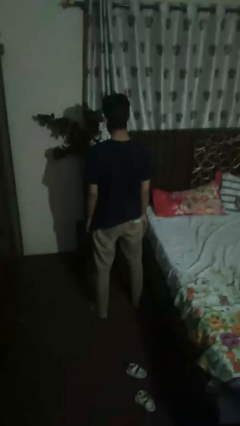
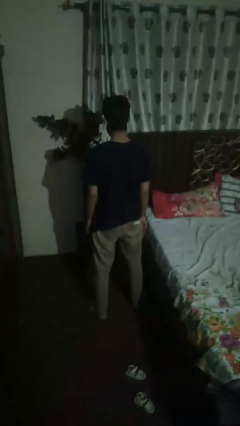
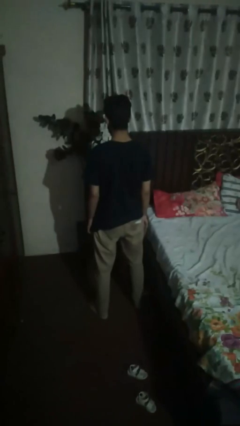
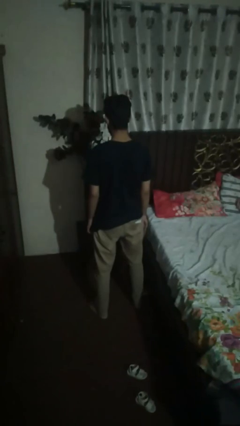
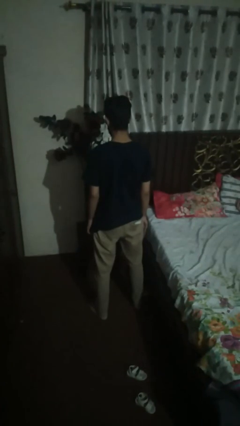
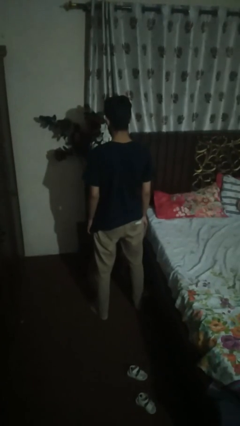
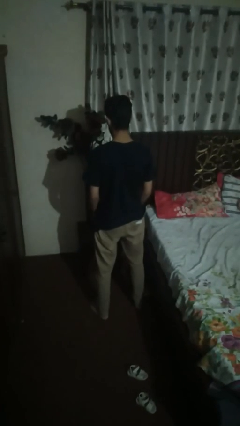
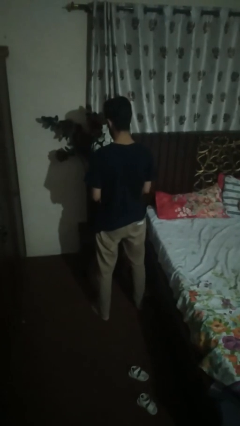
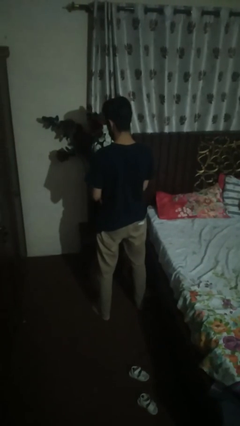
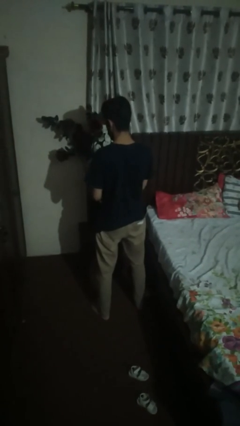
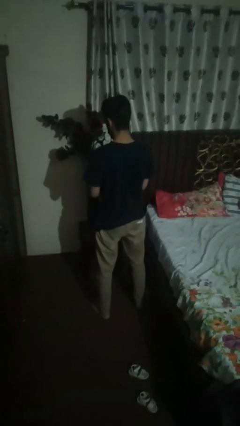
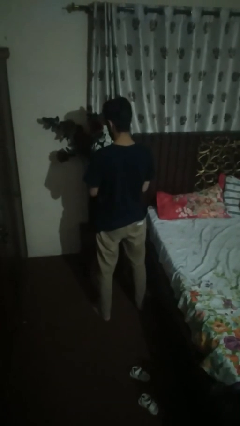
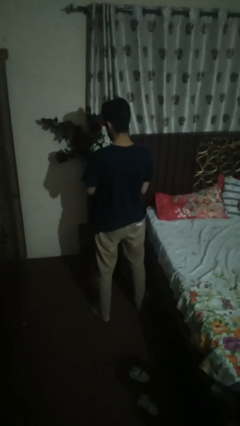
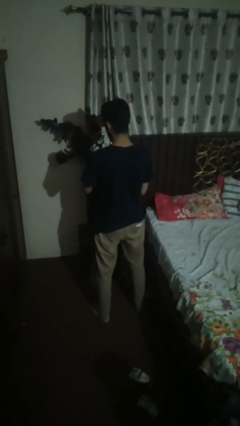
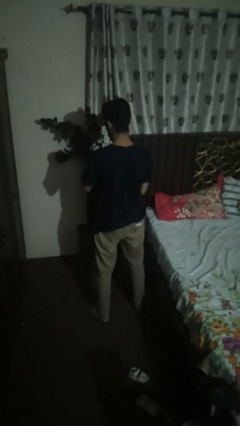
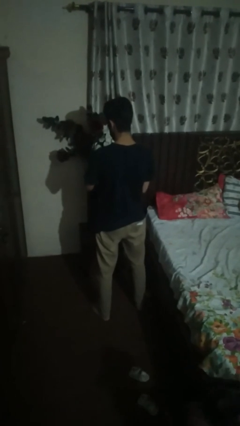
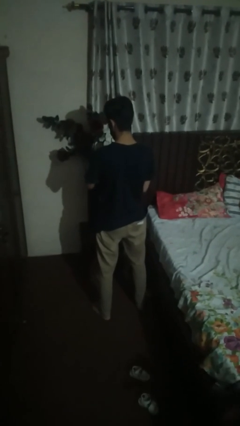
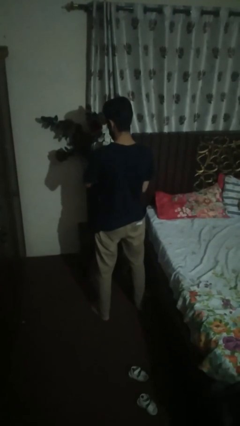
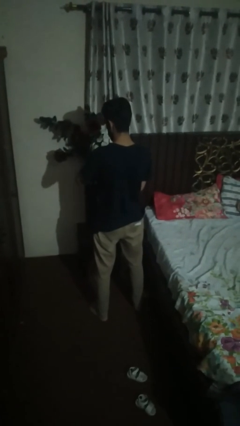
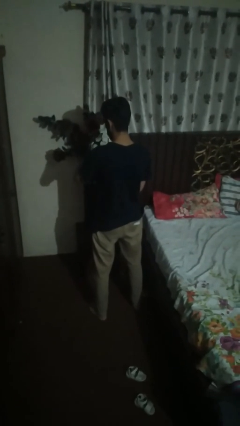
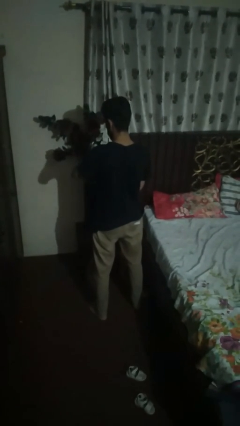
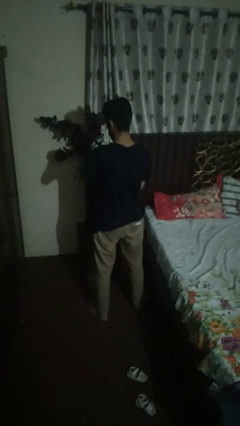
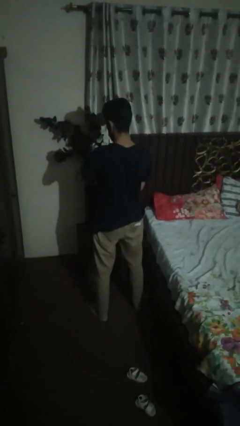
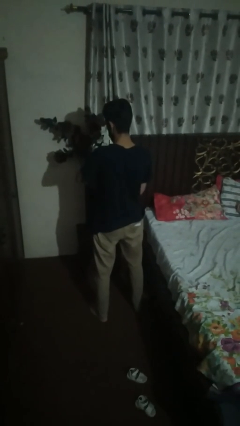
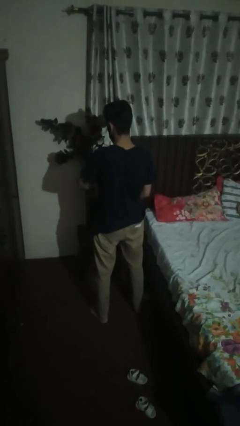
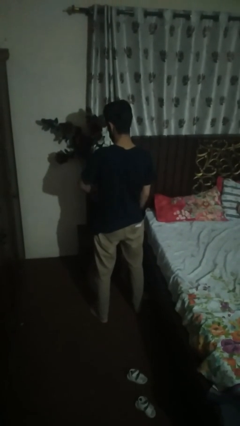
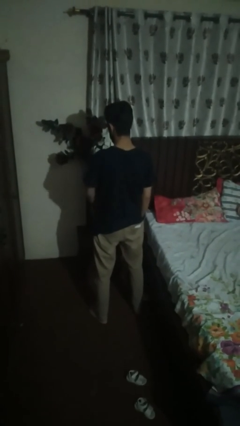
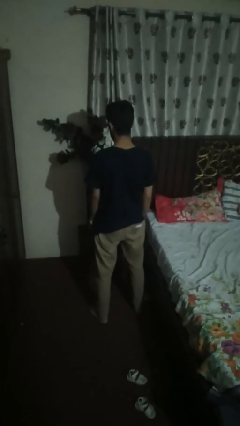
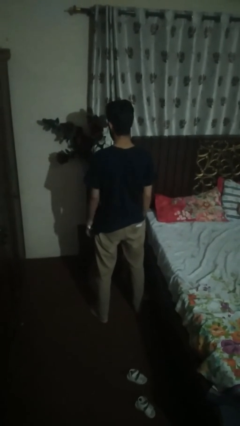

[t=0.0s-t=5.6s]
person puts on wristwatch

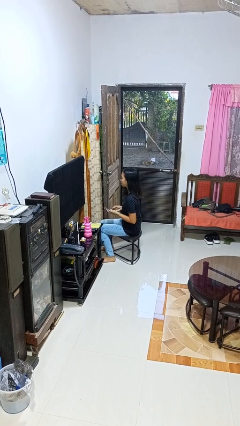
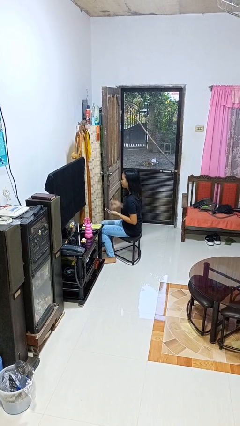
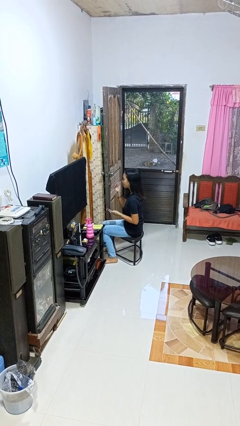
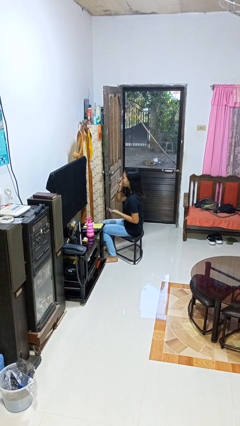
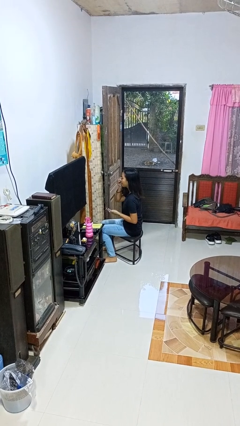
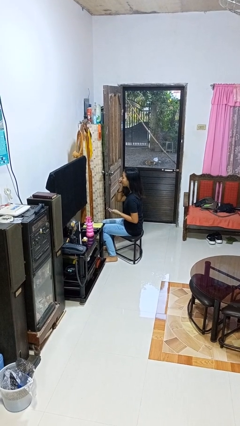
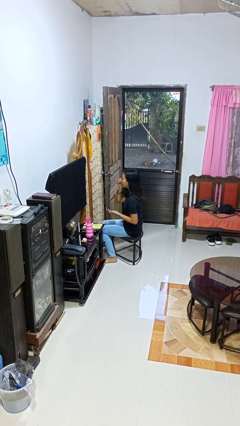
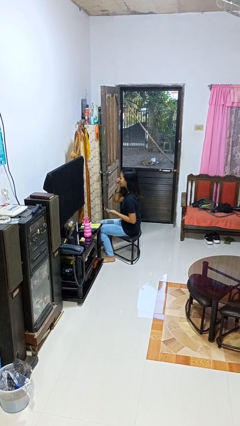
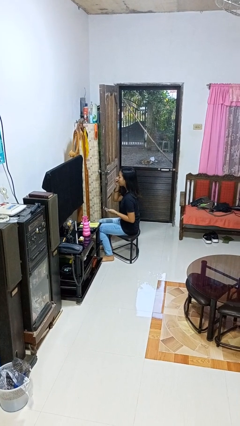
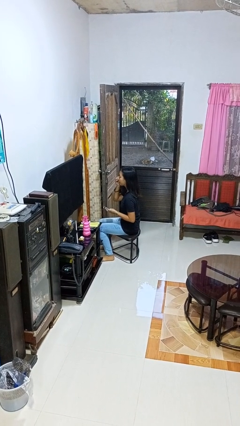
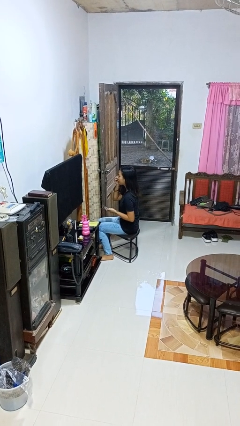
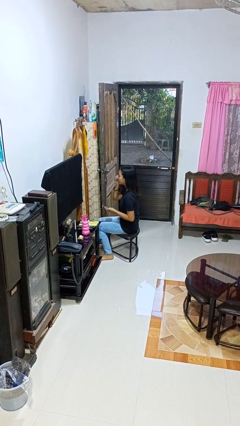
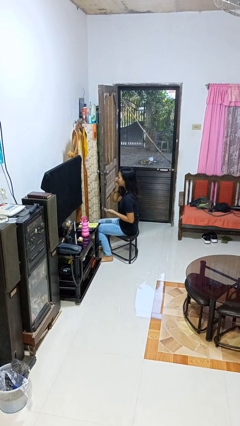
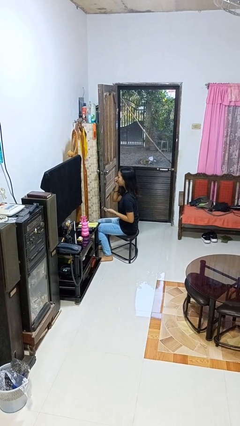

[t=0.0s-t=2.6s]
person applies eye makeup

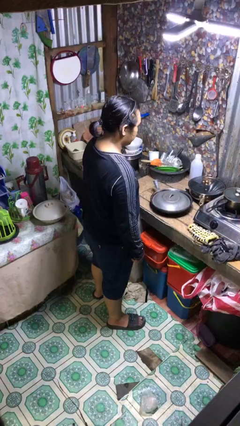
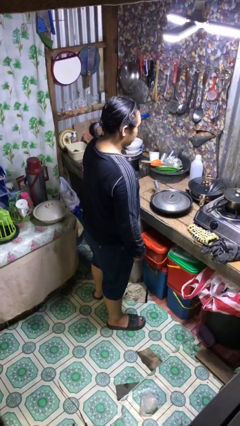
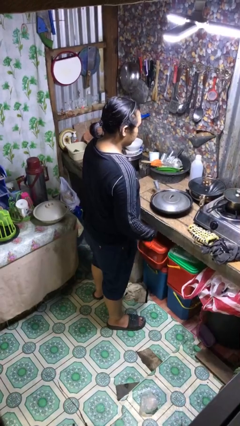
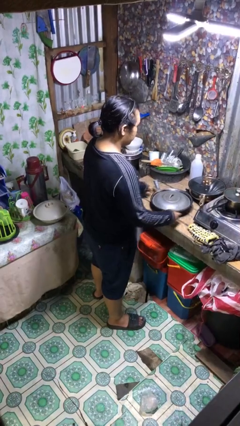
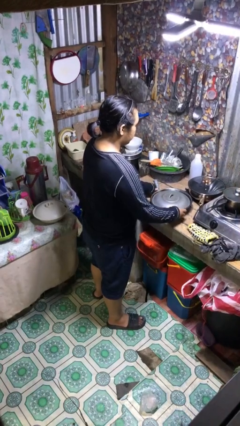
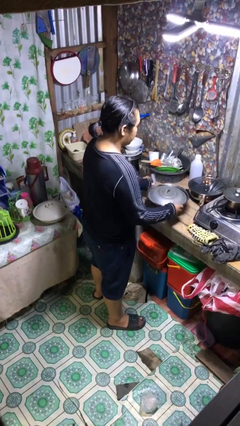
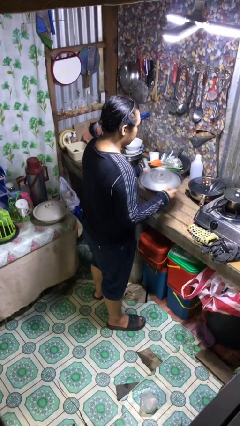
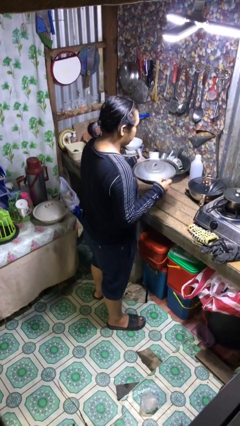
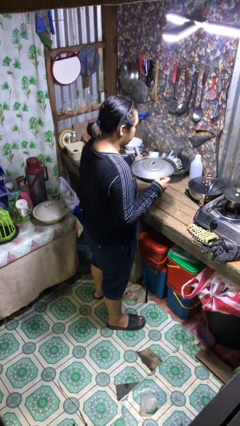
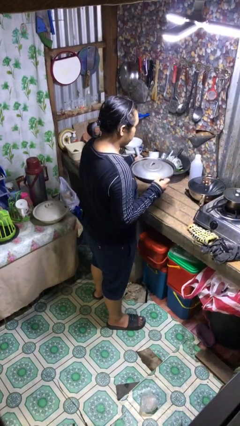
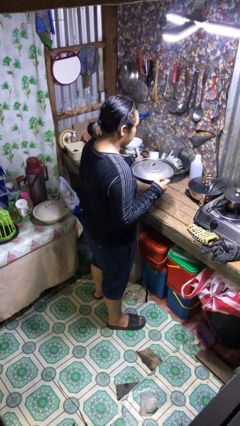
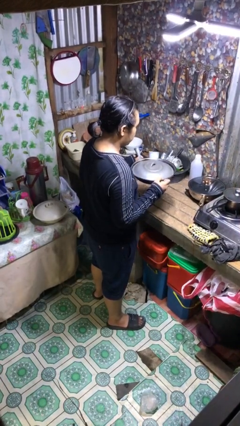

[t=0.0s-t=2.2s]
person picks up object from countertop

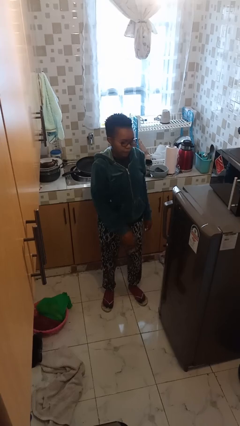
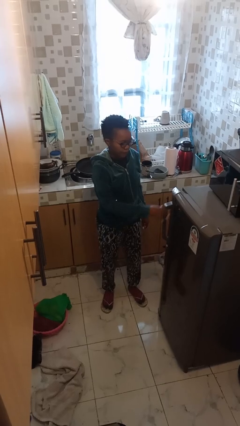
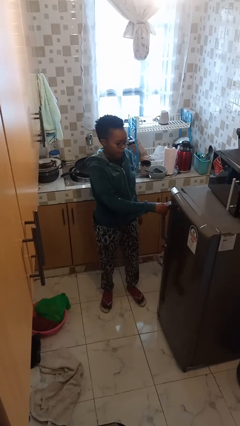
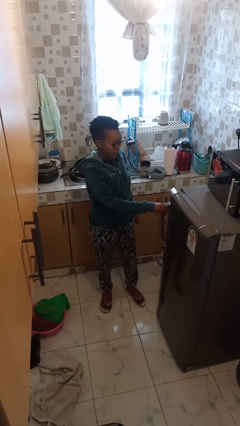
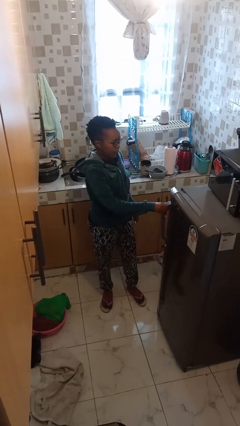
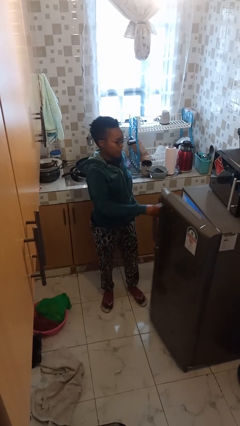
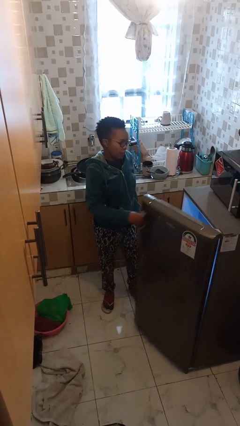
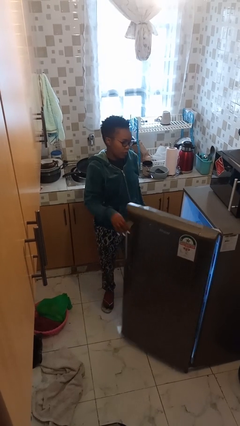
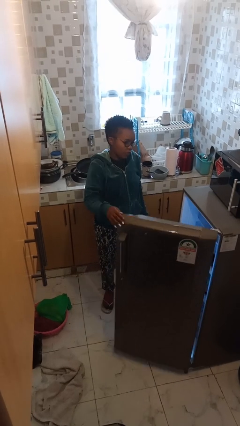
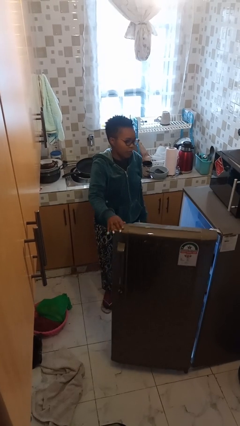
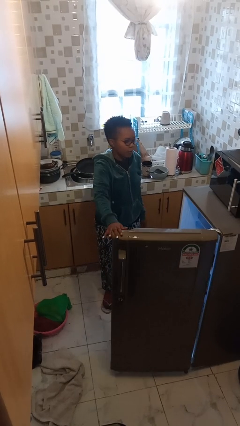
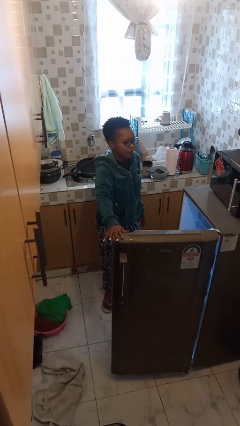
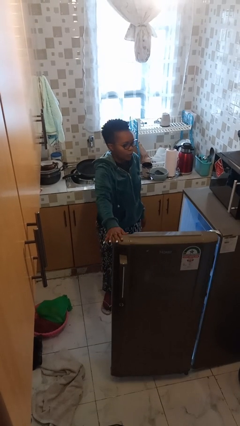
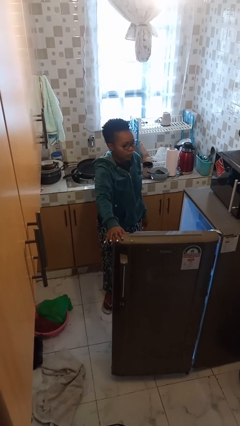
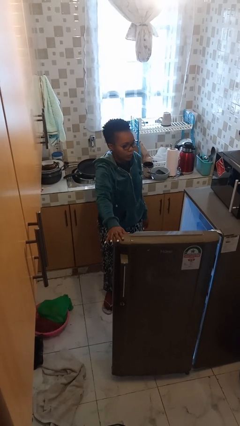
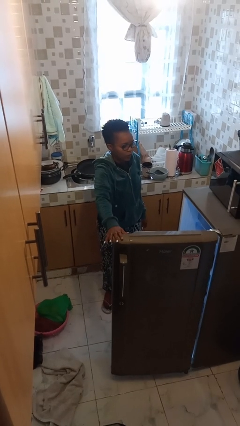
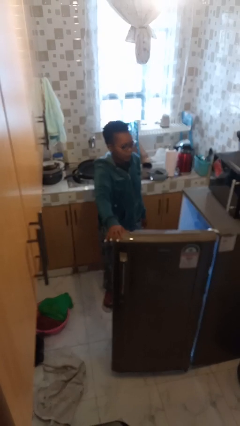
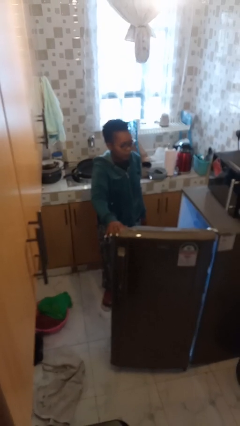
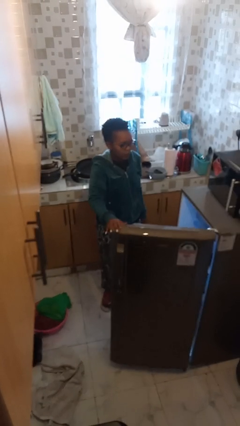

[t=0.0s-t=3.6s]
person opens refrigerator

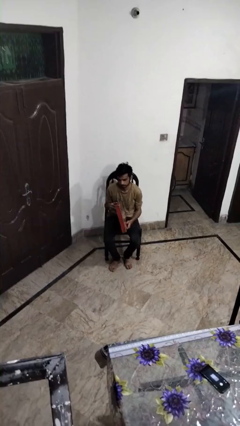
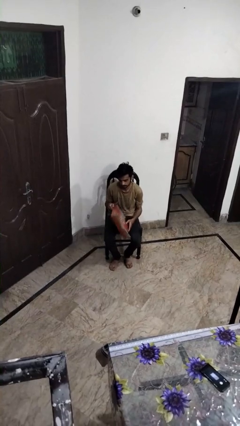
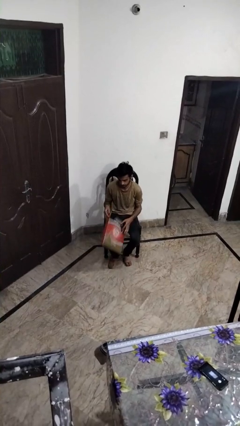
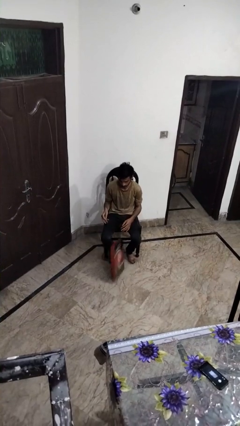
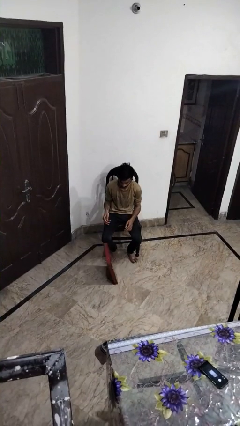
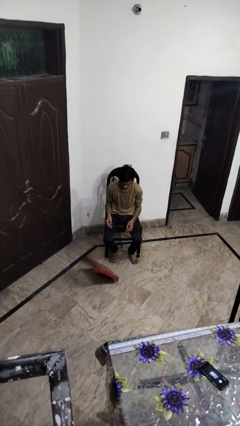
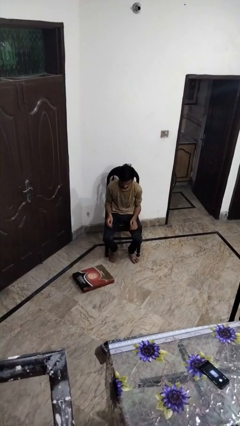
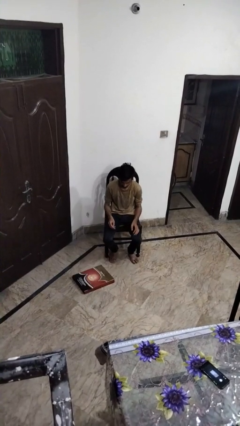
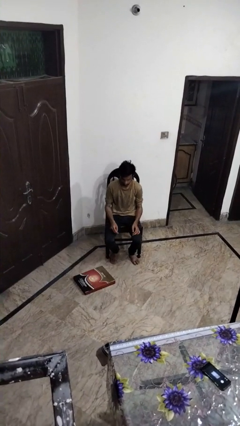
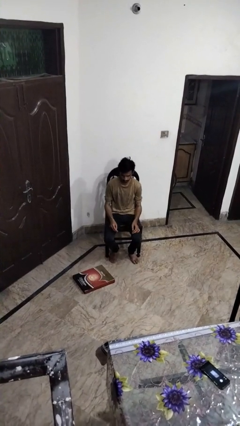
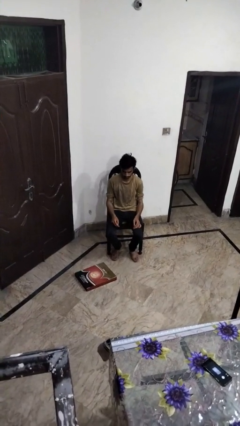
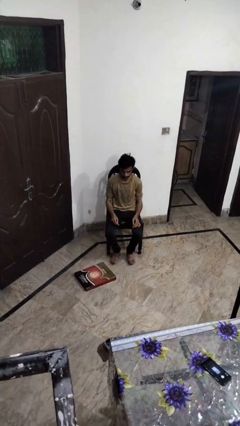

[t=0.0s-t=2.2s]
person drops object

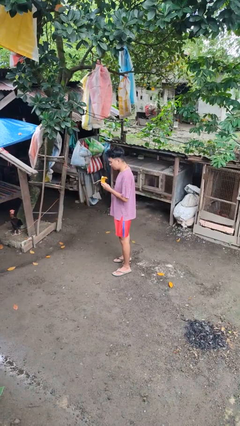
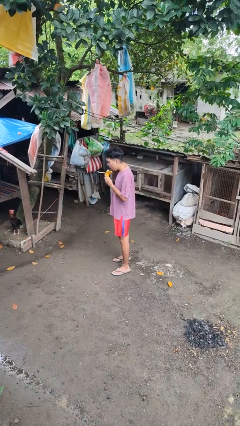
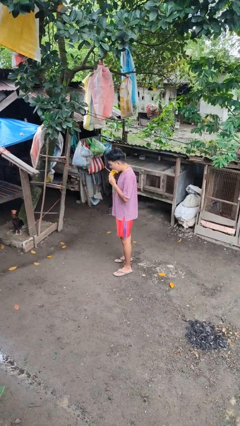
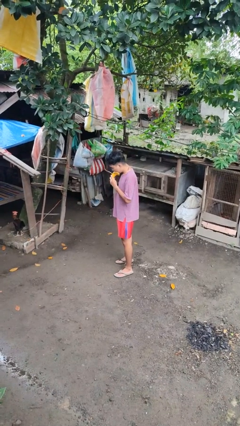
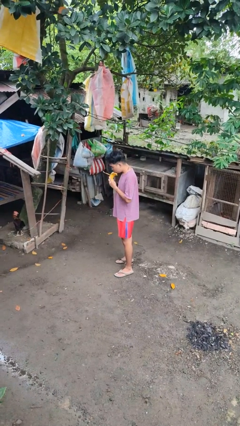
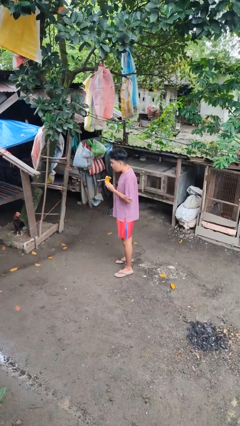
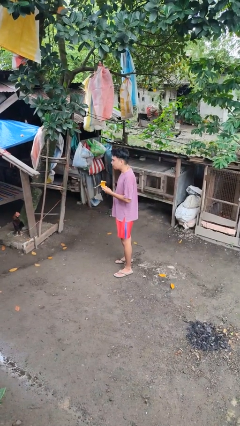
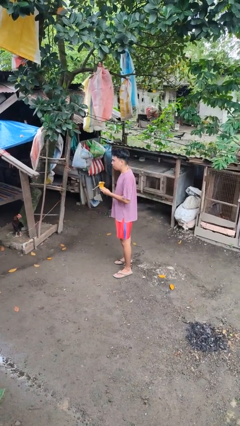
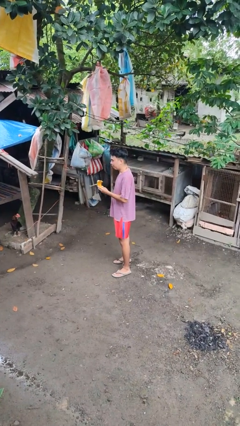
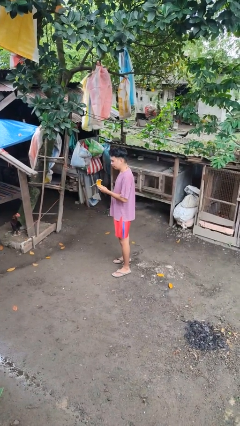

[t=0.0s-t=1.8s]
person eats banana
